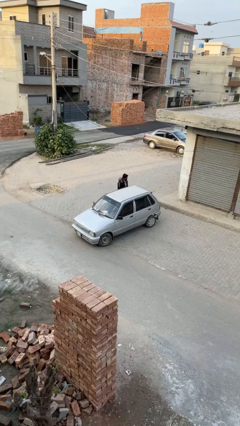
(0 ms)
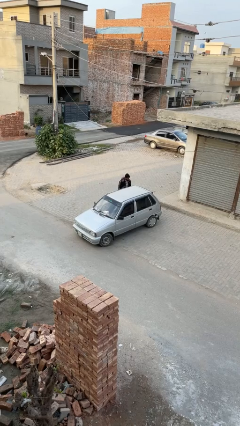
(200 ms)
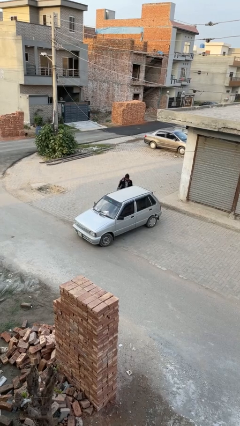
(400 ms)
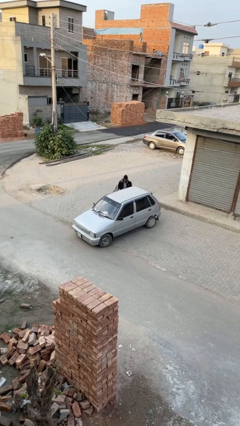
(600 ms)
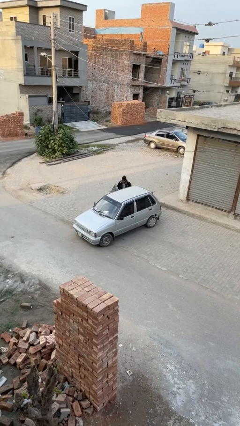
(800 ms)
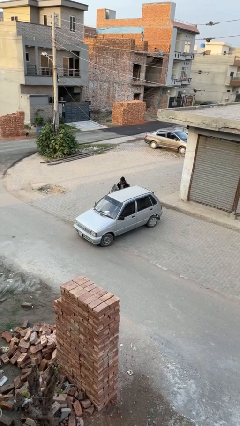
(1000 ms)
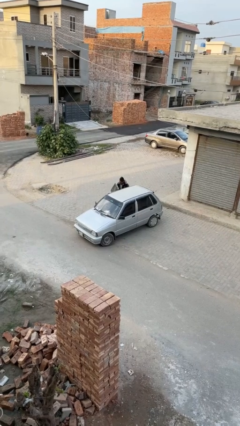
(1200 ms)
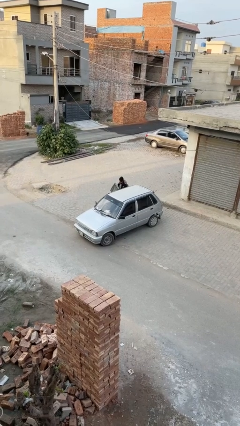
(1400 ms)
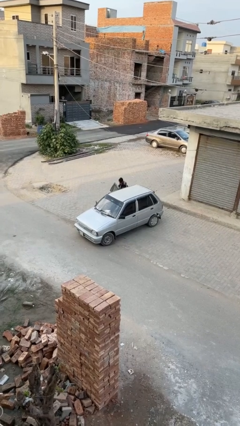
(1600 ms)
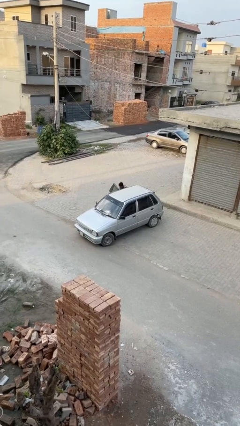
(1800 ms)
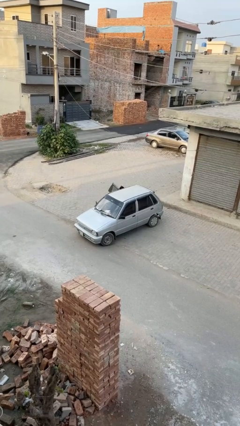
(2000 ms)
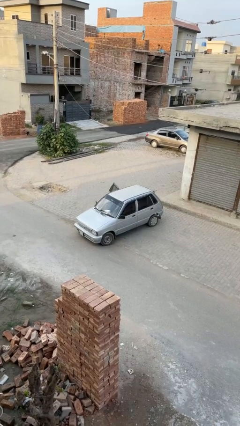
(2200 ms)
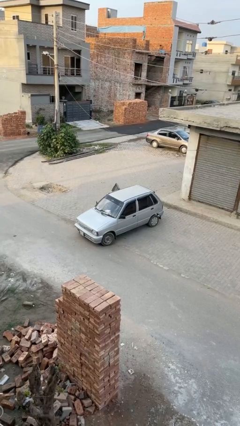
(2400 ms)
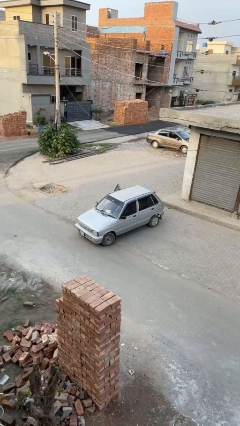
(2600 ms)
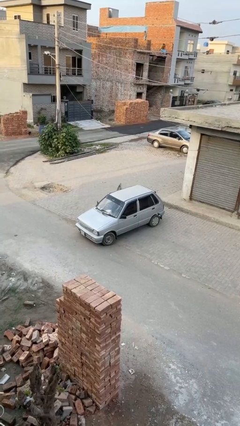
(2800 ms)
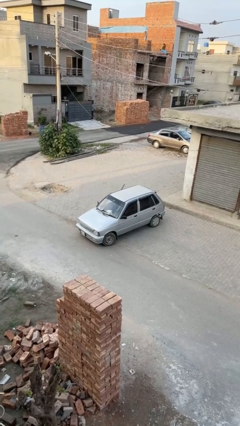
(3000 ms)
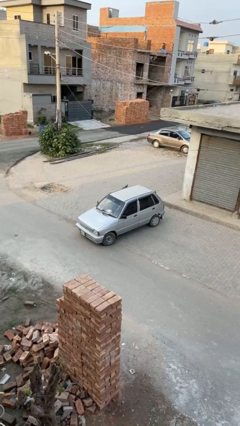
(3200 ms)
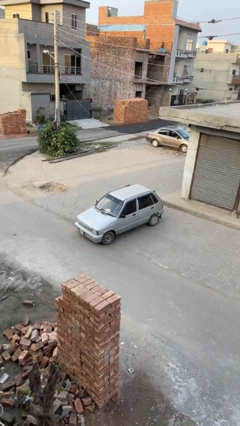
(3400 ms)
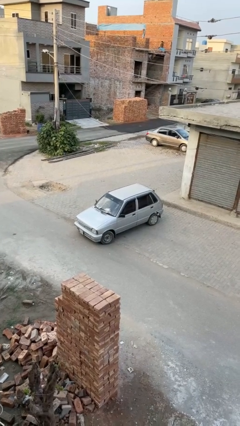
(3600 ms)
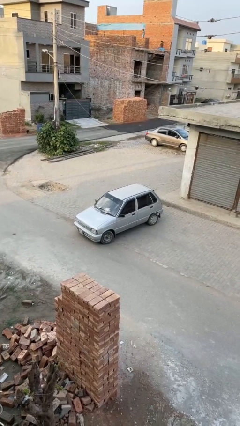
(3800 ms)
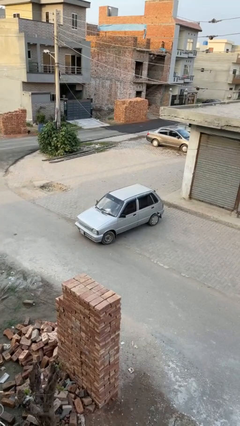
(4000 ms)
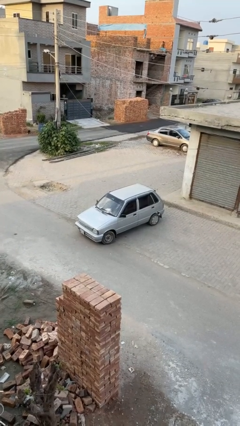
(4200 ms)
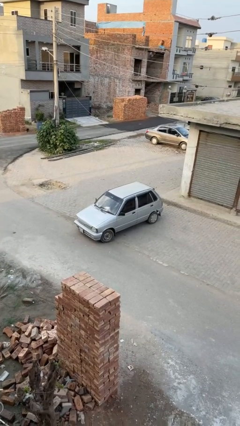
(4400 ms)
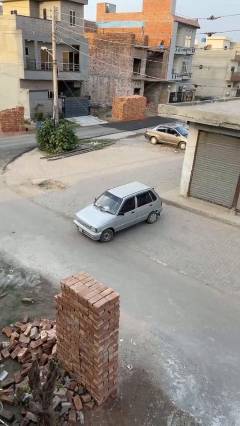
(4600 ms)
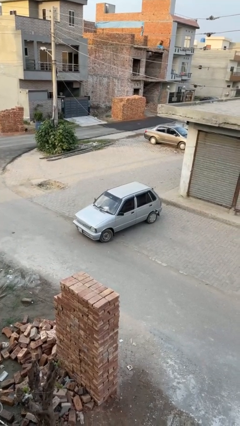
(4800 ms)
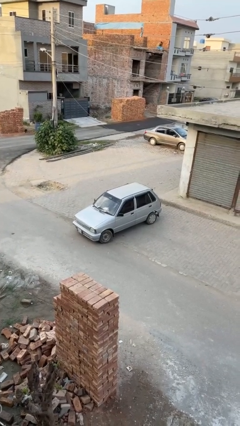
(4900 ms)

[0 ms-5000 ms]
car picks up person

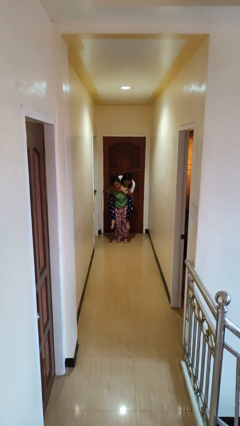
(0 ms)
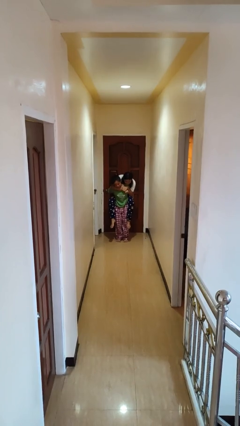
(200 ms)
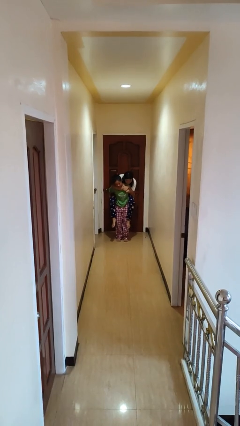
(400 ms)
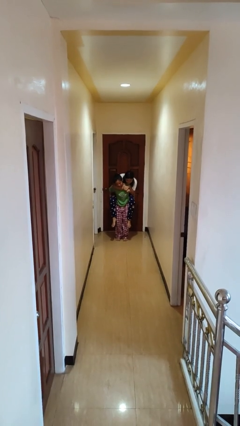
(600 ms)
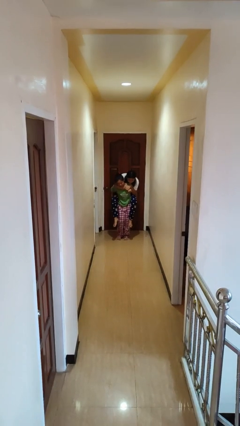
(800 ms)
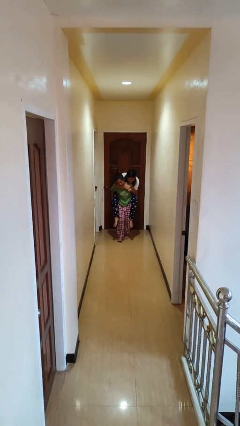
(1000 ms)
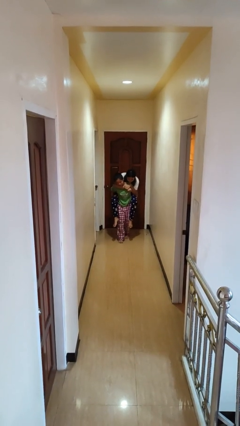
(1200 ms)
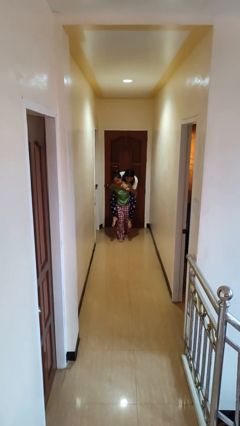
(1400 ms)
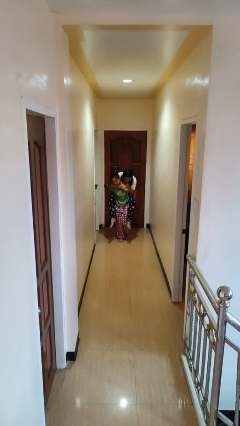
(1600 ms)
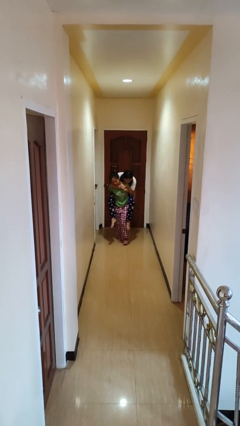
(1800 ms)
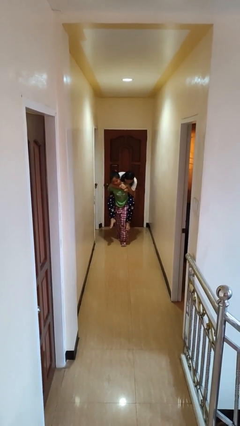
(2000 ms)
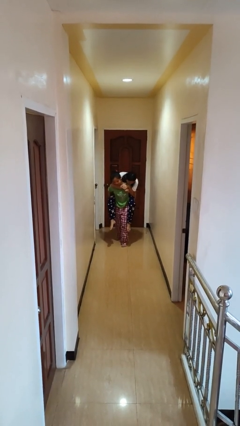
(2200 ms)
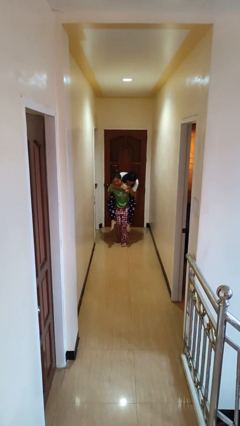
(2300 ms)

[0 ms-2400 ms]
person carries person on back

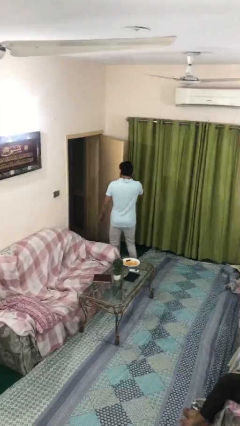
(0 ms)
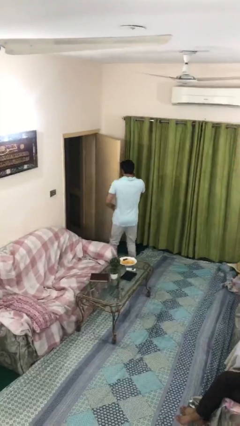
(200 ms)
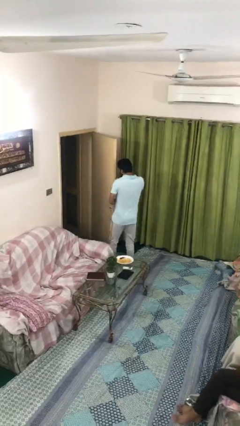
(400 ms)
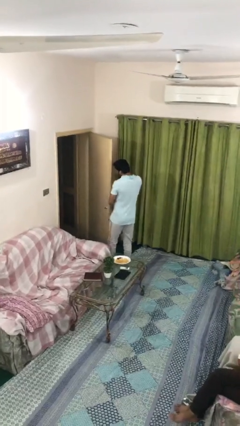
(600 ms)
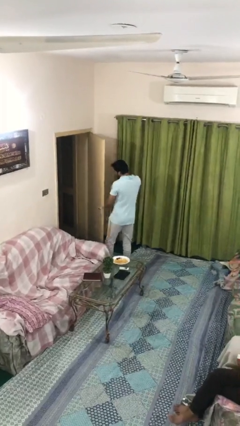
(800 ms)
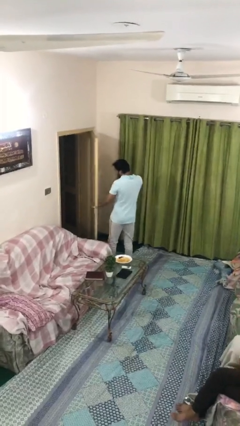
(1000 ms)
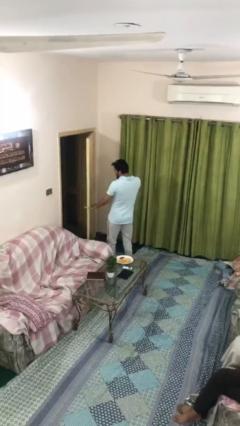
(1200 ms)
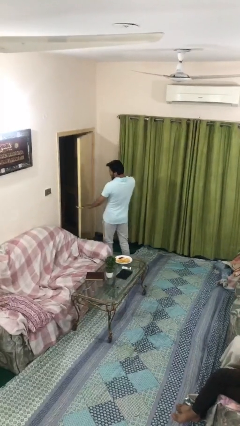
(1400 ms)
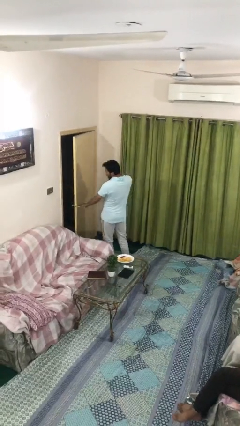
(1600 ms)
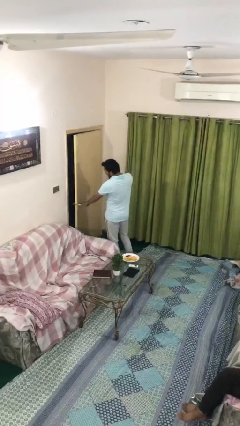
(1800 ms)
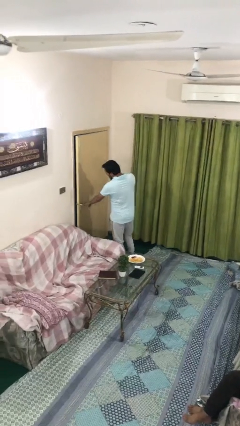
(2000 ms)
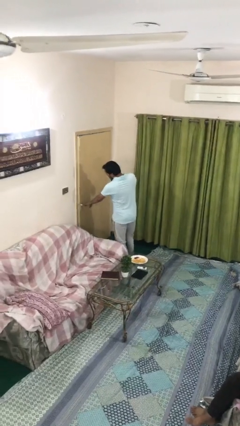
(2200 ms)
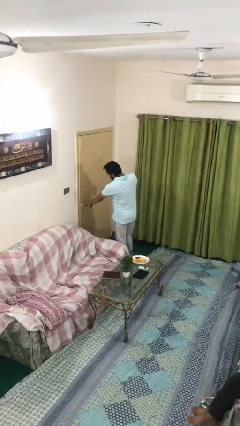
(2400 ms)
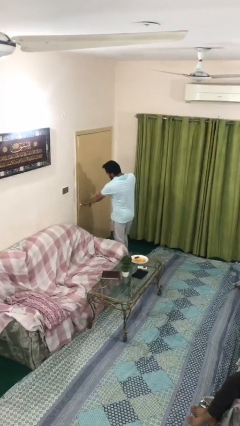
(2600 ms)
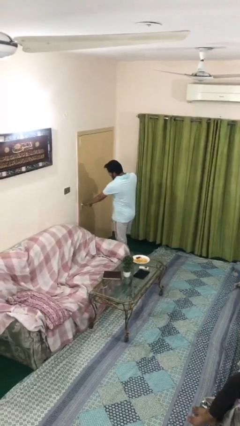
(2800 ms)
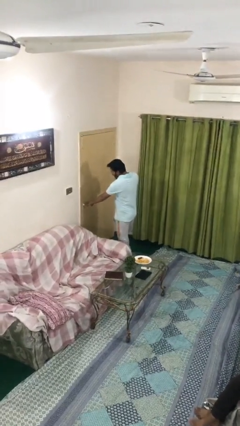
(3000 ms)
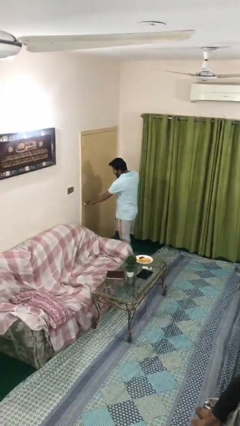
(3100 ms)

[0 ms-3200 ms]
person closes facility door

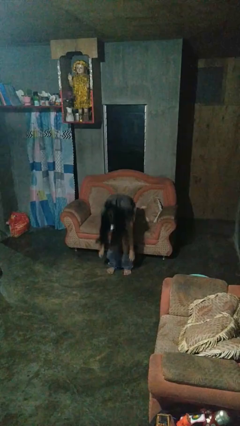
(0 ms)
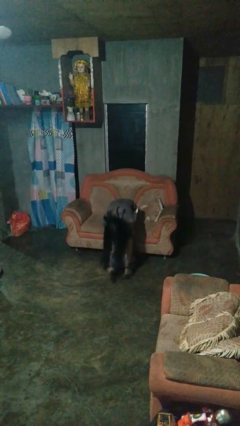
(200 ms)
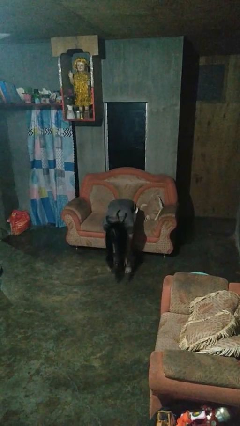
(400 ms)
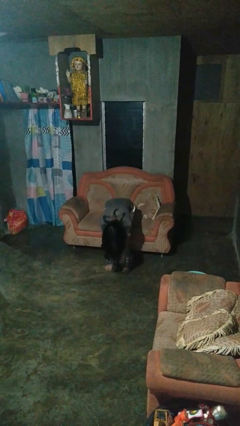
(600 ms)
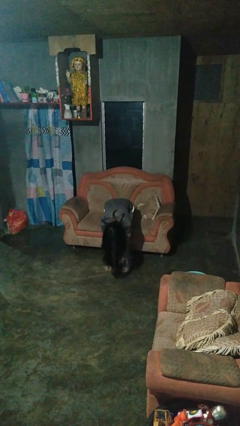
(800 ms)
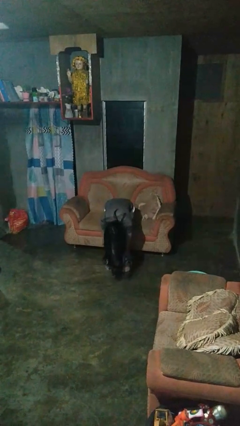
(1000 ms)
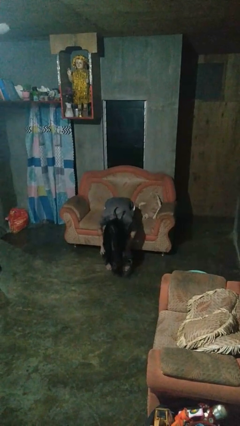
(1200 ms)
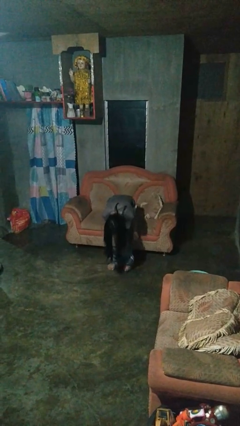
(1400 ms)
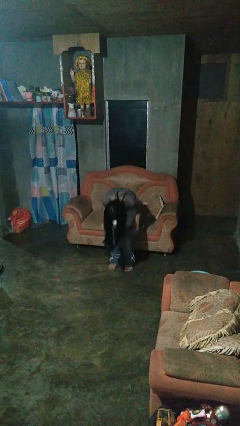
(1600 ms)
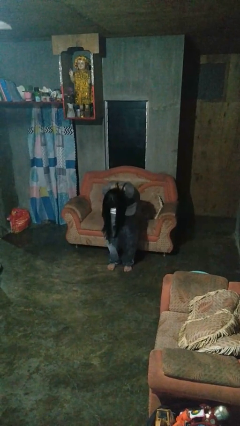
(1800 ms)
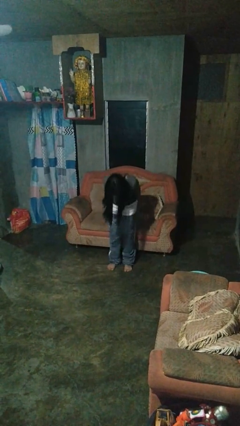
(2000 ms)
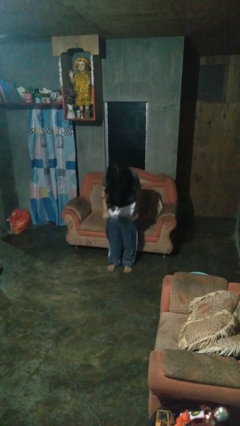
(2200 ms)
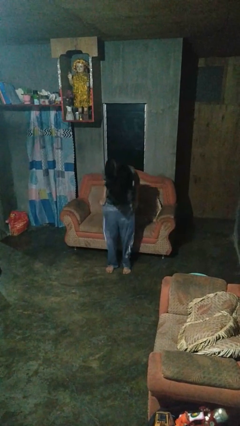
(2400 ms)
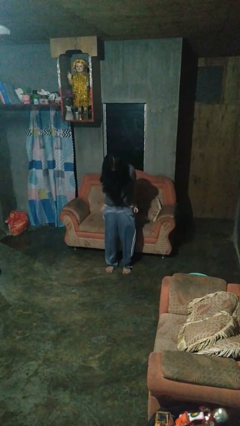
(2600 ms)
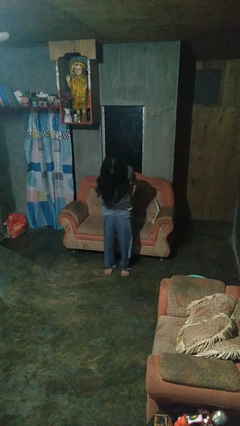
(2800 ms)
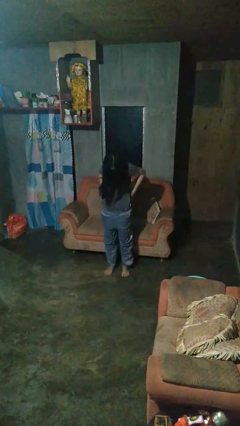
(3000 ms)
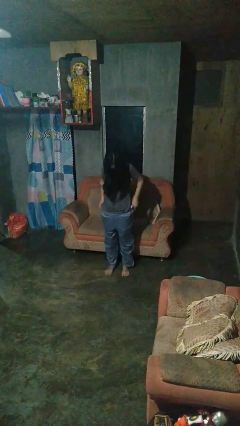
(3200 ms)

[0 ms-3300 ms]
person puts on pants

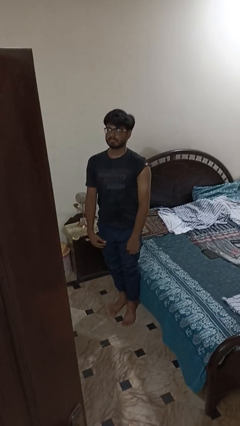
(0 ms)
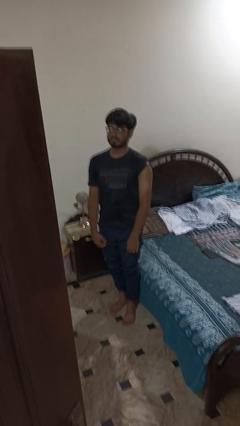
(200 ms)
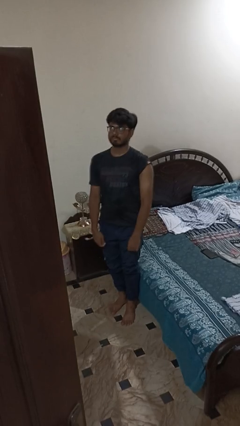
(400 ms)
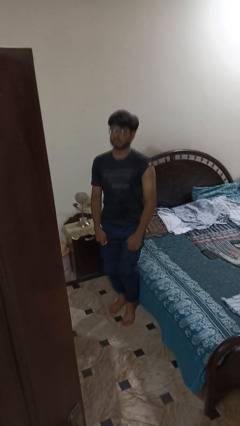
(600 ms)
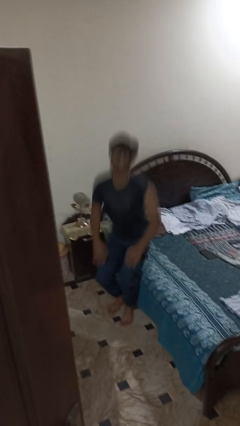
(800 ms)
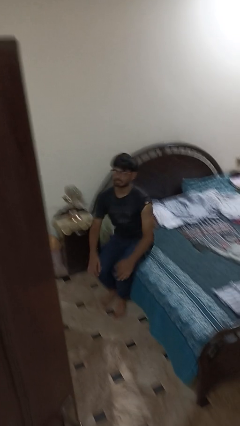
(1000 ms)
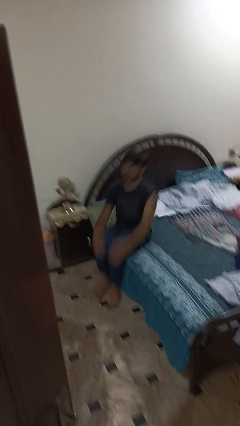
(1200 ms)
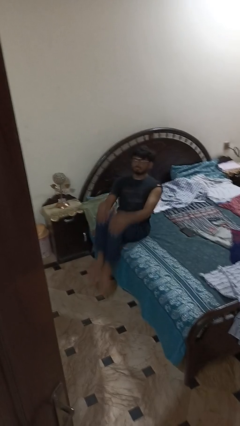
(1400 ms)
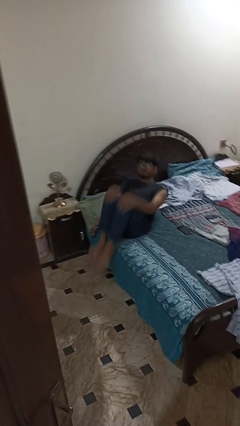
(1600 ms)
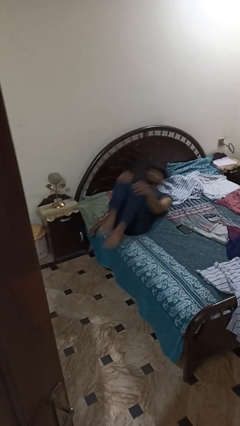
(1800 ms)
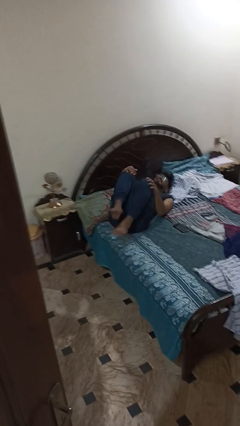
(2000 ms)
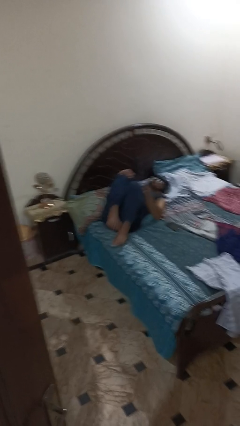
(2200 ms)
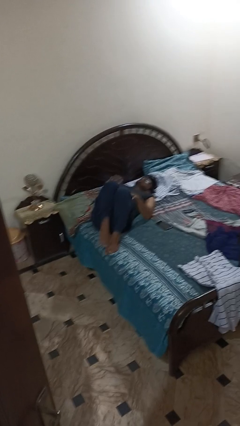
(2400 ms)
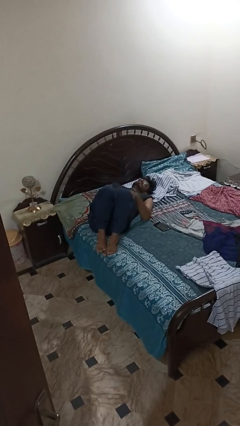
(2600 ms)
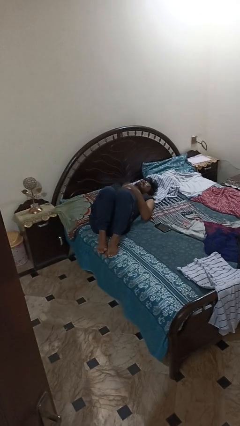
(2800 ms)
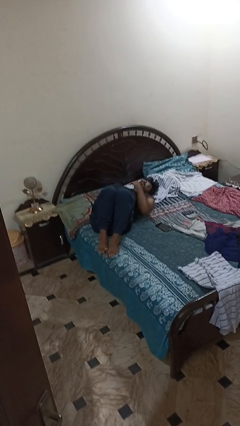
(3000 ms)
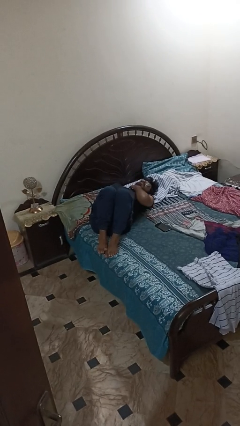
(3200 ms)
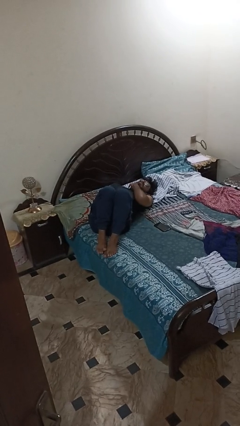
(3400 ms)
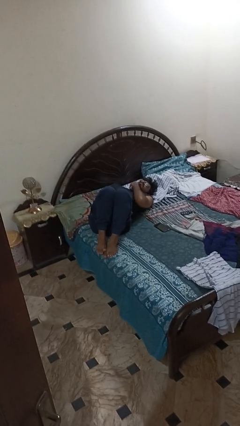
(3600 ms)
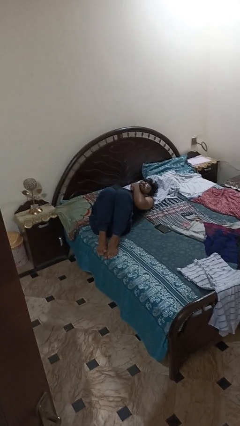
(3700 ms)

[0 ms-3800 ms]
person lies down on bed

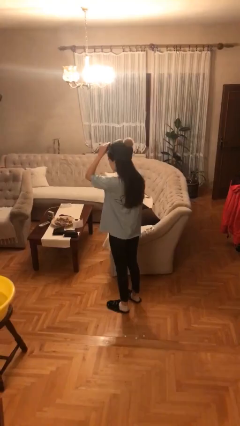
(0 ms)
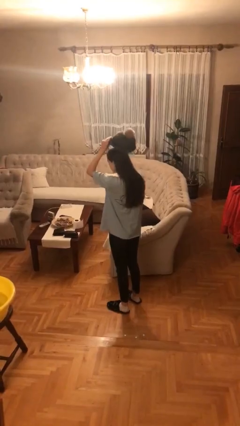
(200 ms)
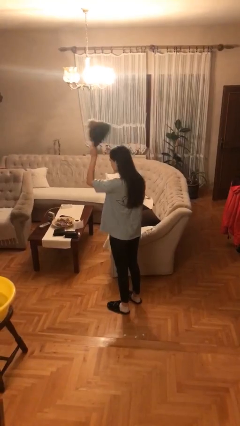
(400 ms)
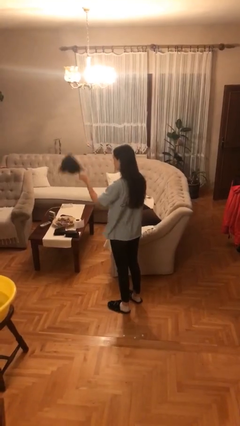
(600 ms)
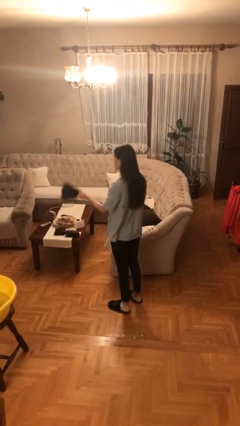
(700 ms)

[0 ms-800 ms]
person takes off hat
